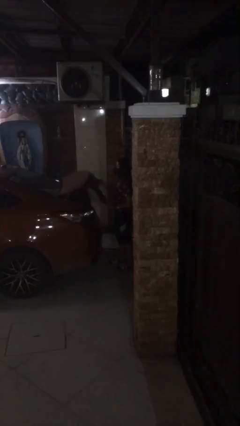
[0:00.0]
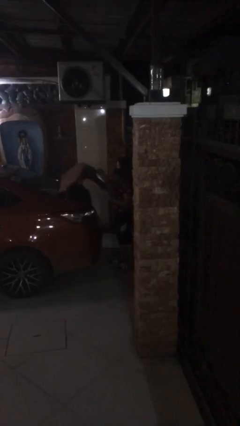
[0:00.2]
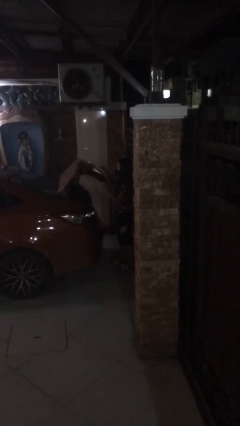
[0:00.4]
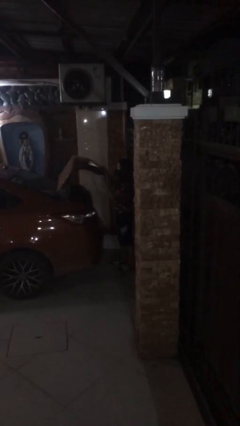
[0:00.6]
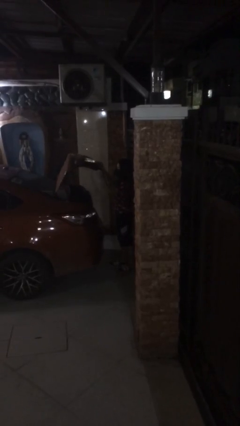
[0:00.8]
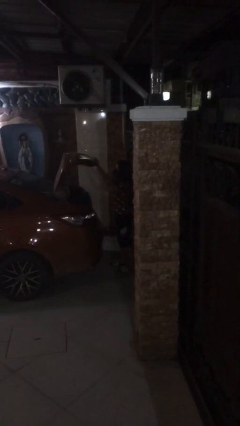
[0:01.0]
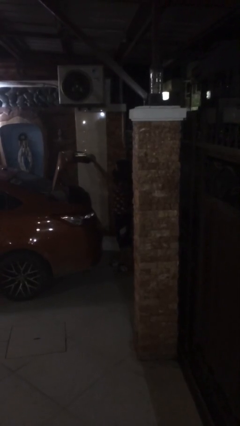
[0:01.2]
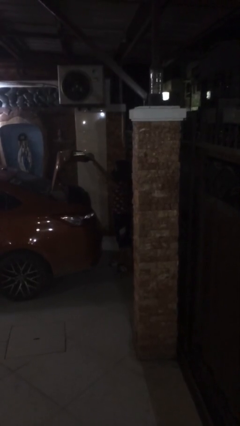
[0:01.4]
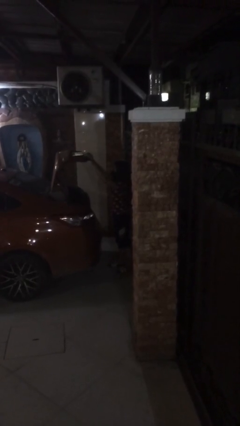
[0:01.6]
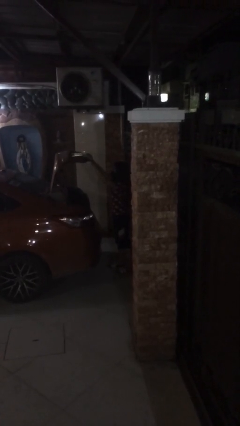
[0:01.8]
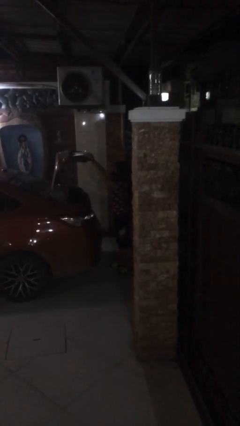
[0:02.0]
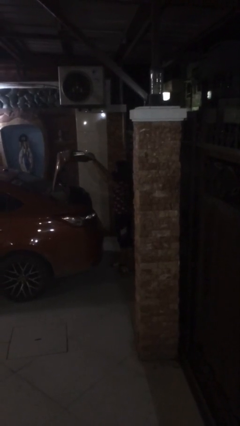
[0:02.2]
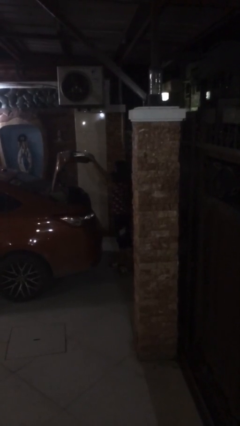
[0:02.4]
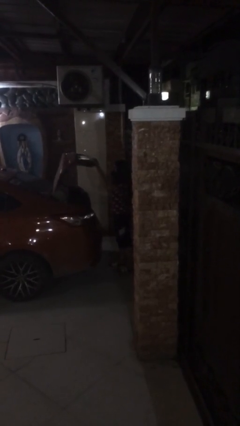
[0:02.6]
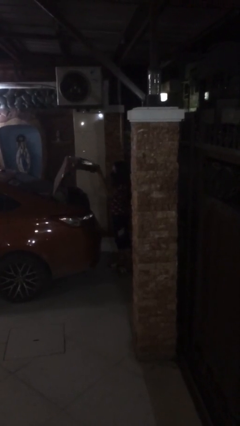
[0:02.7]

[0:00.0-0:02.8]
person opens car trunk

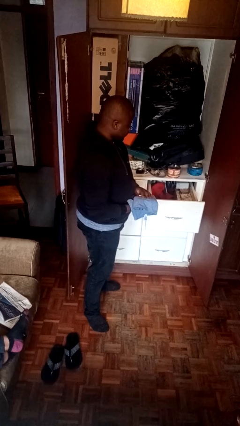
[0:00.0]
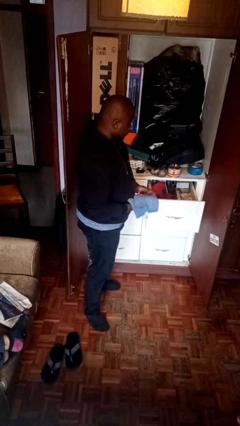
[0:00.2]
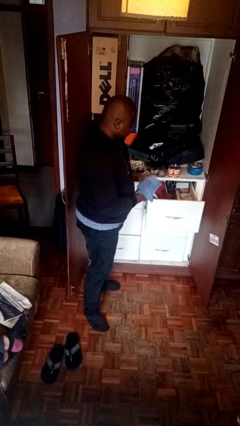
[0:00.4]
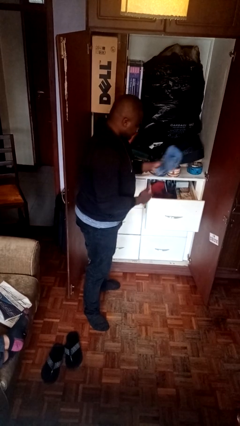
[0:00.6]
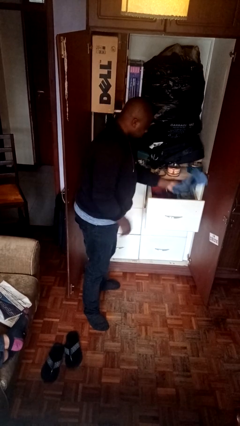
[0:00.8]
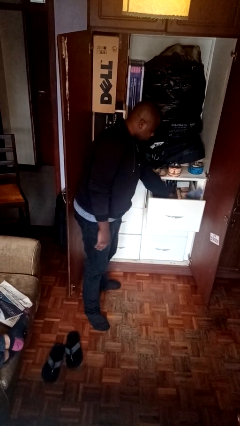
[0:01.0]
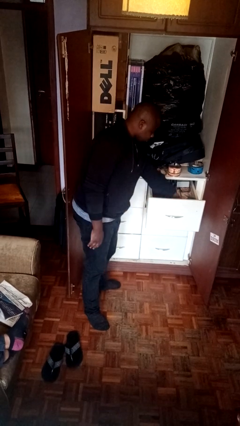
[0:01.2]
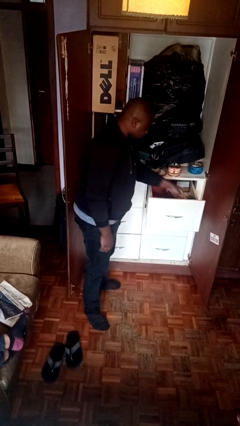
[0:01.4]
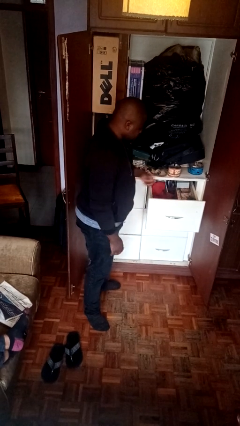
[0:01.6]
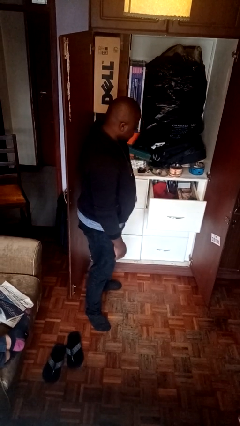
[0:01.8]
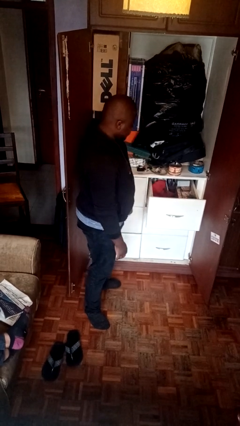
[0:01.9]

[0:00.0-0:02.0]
person puts clothes into dresser

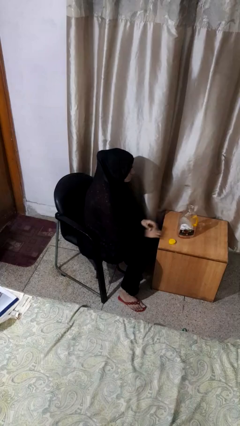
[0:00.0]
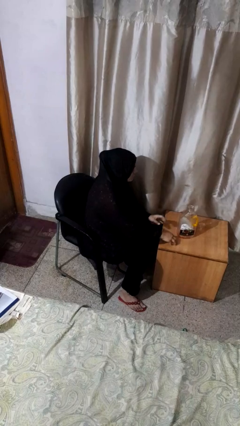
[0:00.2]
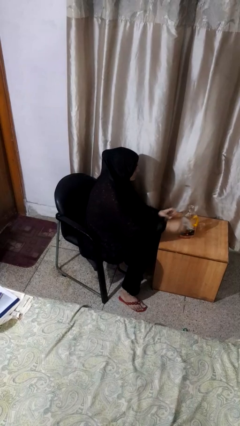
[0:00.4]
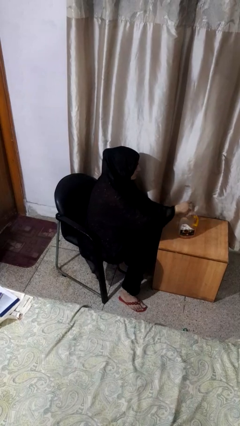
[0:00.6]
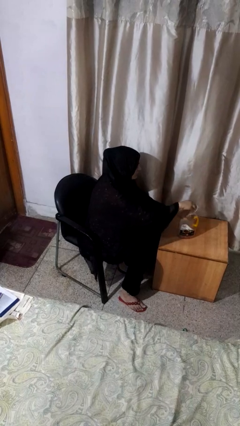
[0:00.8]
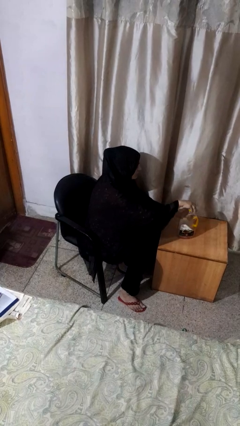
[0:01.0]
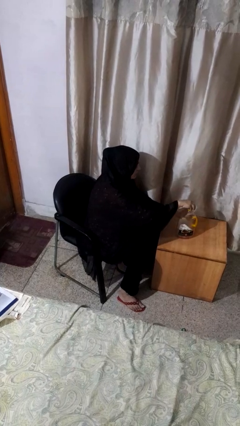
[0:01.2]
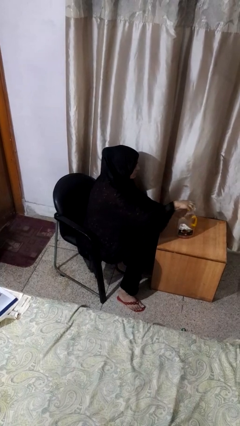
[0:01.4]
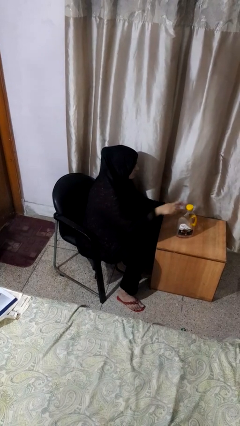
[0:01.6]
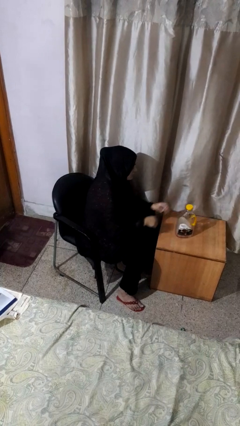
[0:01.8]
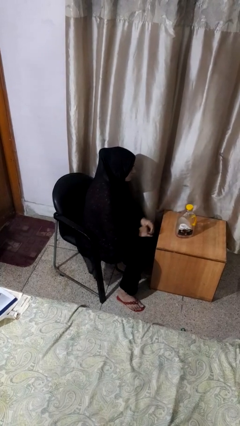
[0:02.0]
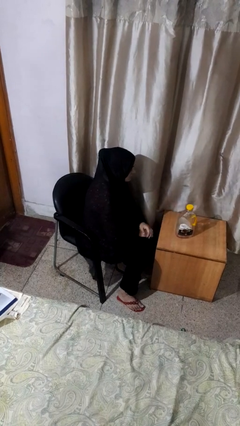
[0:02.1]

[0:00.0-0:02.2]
person screws lid to bottle

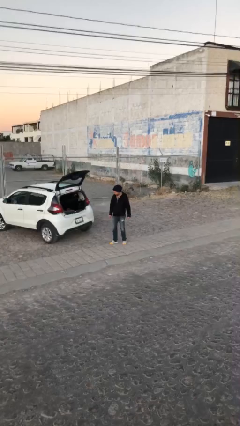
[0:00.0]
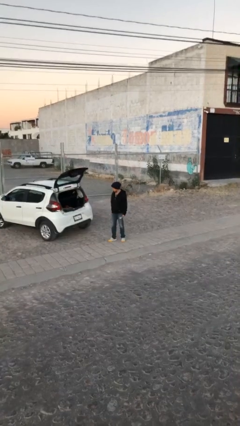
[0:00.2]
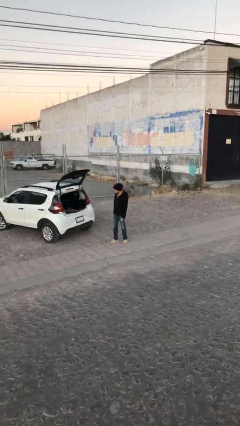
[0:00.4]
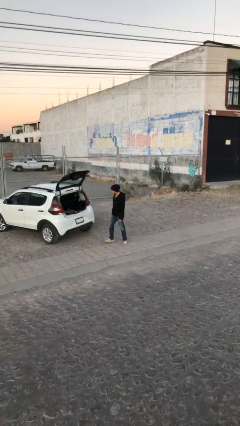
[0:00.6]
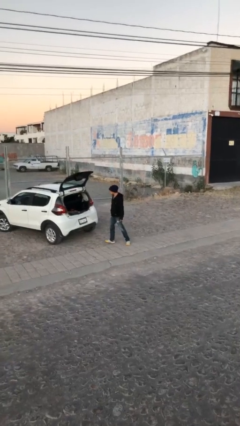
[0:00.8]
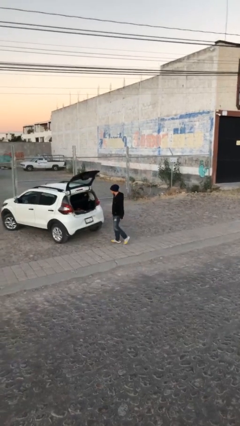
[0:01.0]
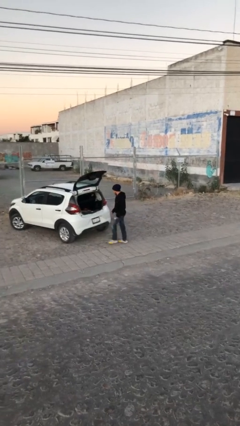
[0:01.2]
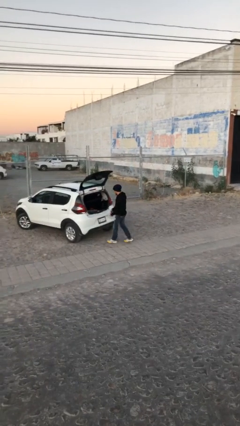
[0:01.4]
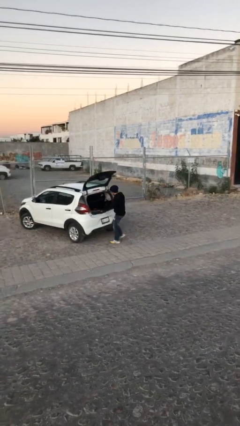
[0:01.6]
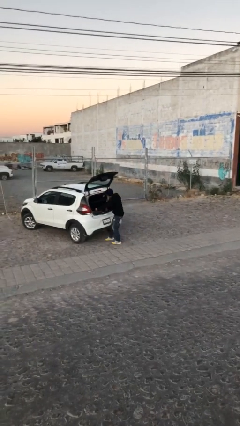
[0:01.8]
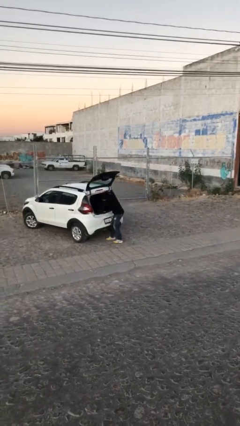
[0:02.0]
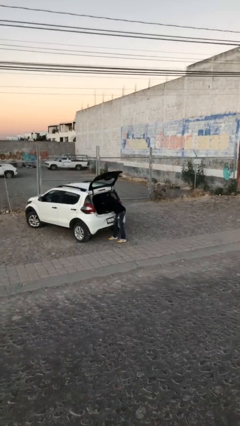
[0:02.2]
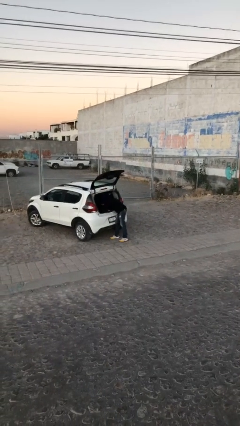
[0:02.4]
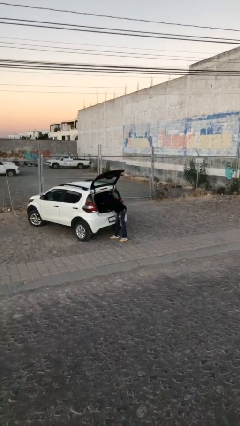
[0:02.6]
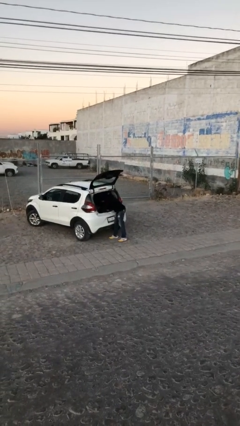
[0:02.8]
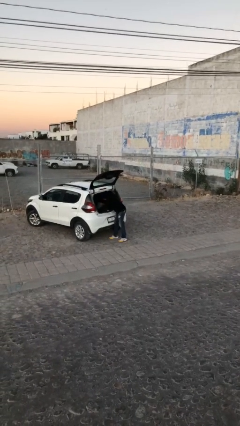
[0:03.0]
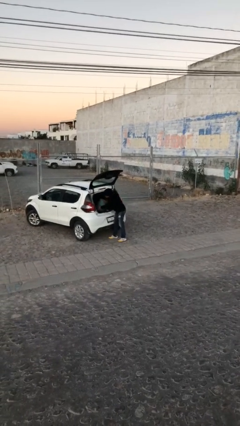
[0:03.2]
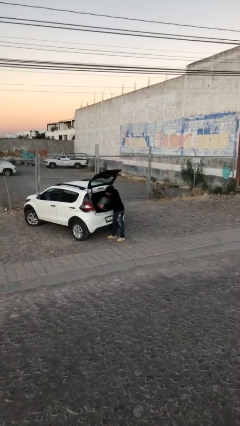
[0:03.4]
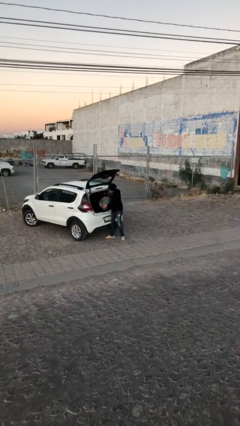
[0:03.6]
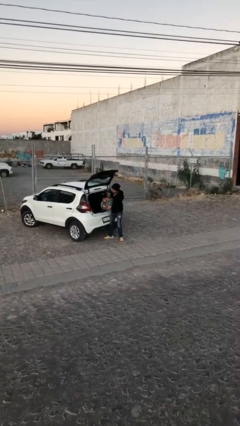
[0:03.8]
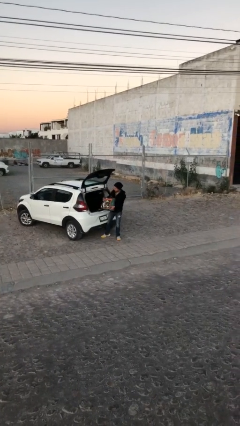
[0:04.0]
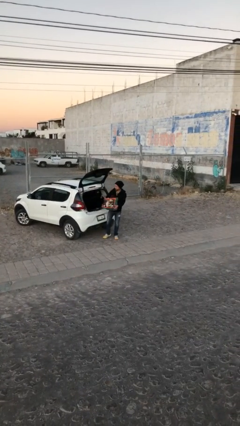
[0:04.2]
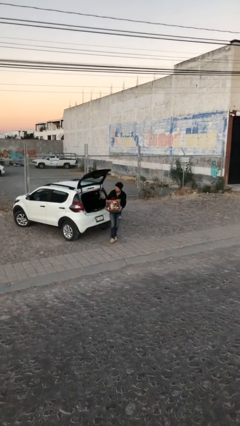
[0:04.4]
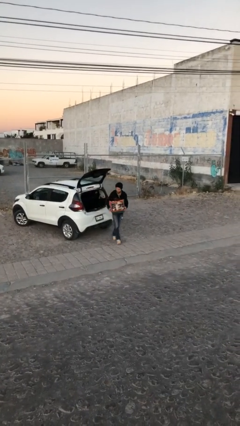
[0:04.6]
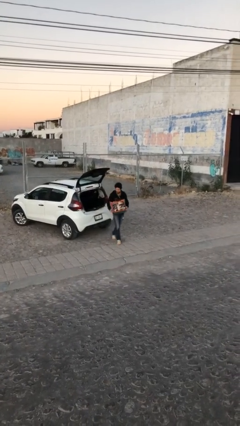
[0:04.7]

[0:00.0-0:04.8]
person unloads car

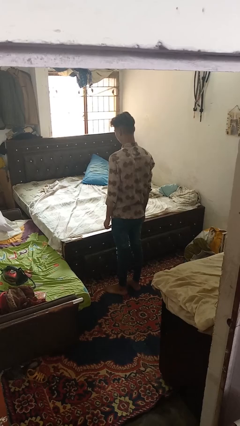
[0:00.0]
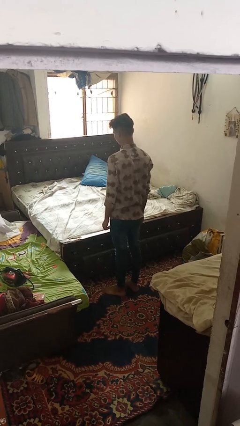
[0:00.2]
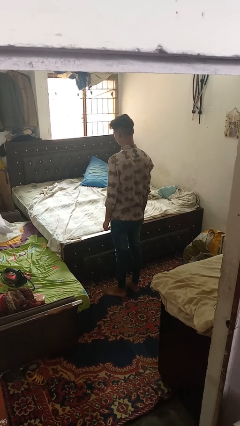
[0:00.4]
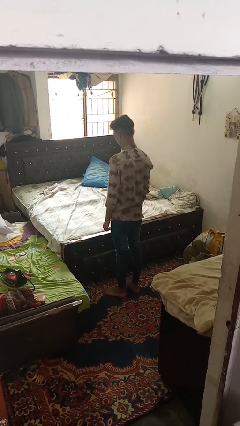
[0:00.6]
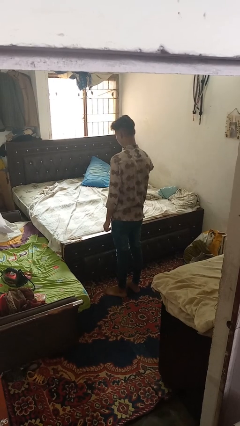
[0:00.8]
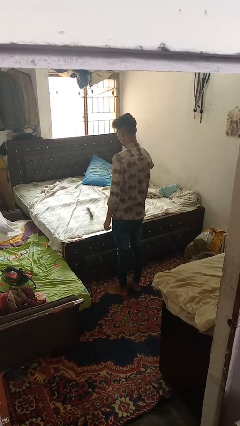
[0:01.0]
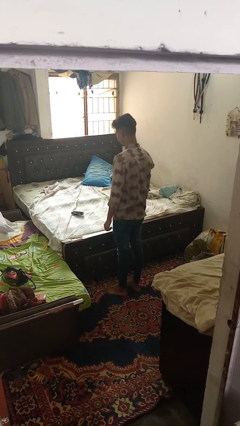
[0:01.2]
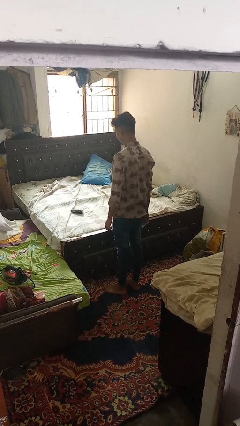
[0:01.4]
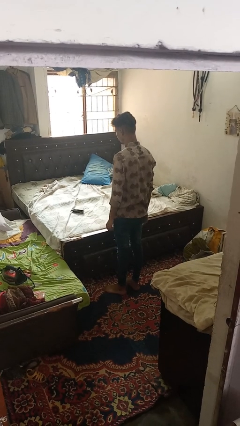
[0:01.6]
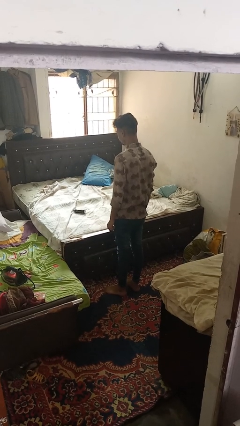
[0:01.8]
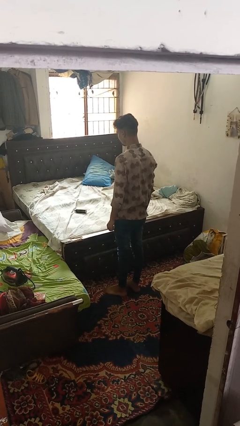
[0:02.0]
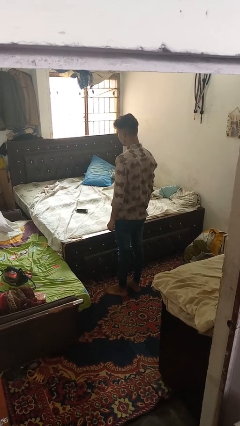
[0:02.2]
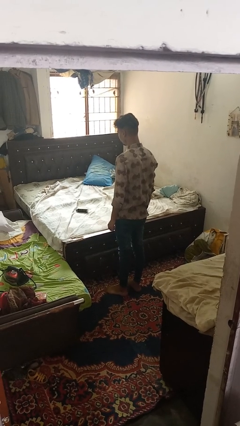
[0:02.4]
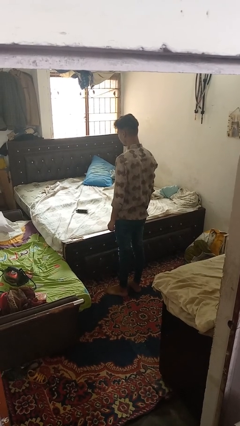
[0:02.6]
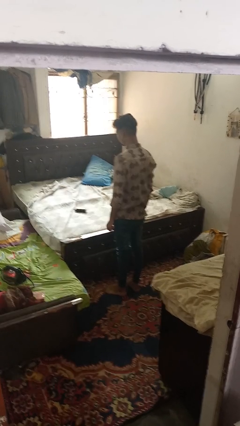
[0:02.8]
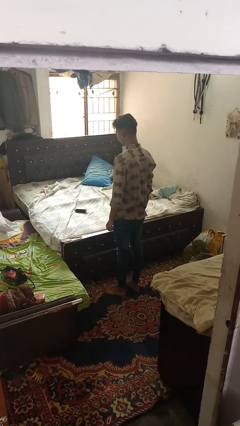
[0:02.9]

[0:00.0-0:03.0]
person throws object on bed

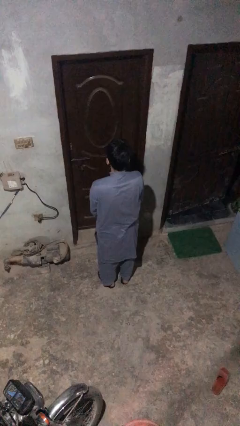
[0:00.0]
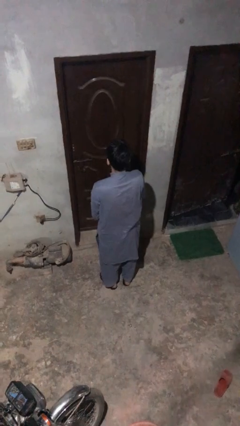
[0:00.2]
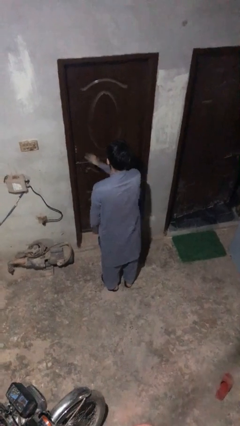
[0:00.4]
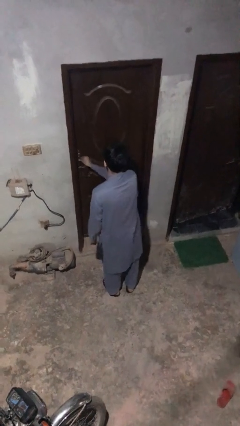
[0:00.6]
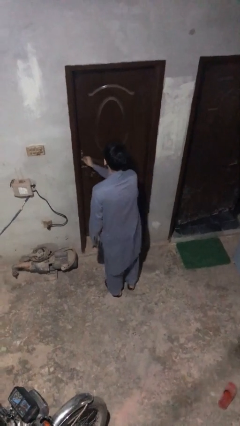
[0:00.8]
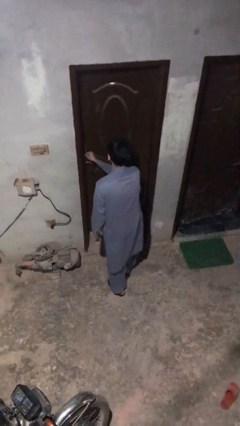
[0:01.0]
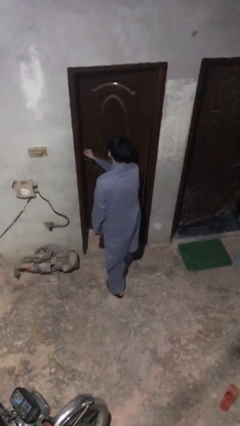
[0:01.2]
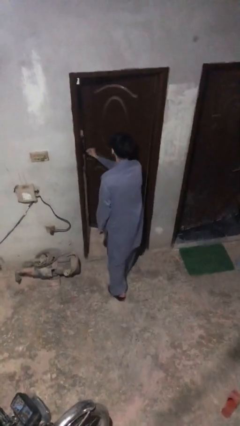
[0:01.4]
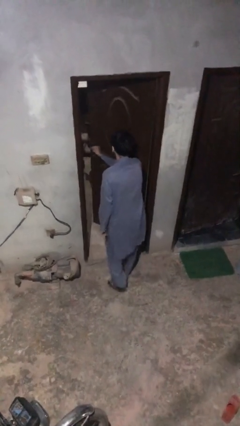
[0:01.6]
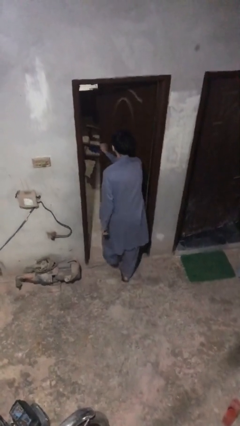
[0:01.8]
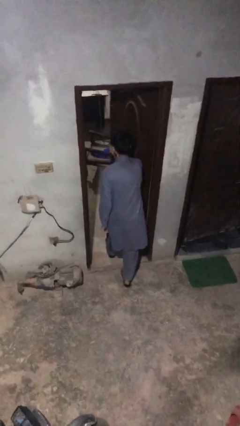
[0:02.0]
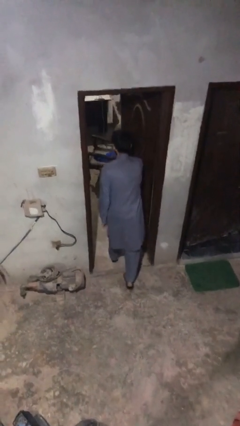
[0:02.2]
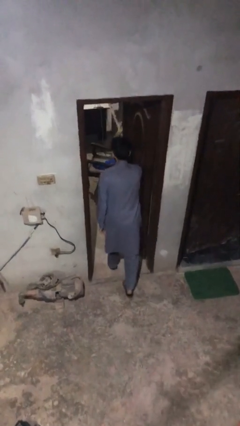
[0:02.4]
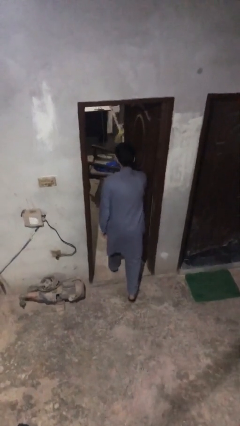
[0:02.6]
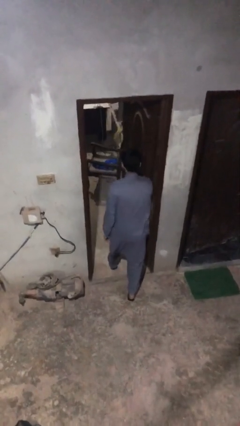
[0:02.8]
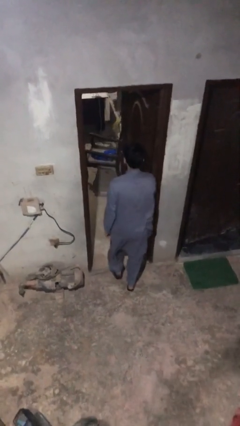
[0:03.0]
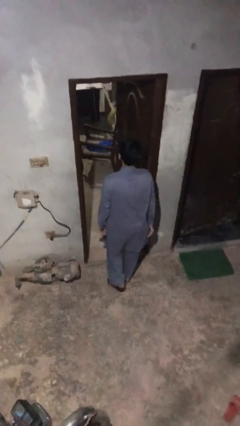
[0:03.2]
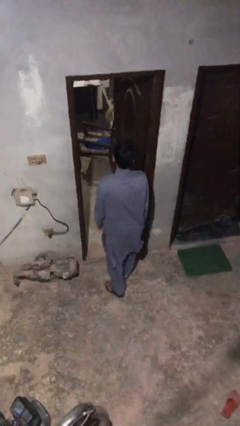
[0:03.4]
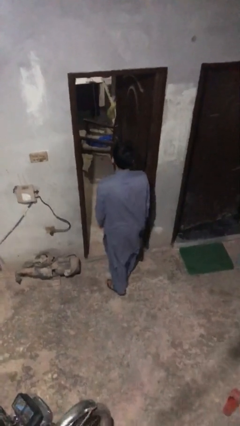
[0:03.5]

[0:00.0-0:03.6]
person opens facility door
